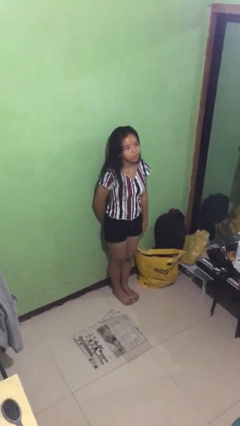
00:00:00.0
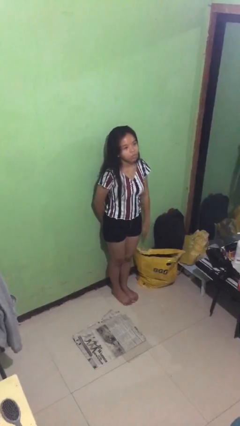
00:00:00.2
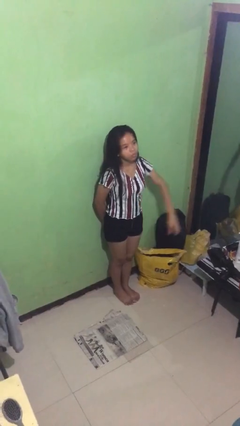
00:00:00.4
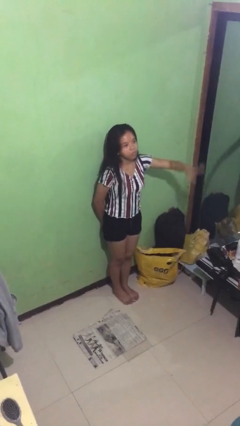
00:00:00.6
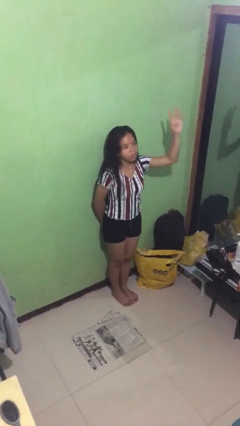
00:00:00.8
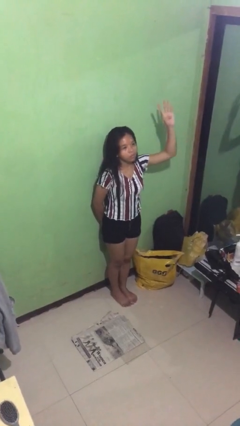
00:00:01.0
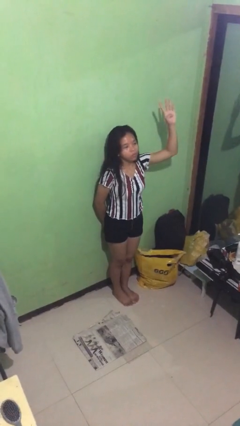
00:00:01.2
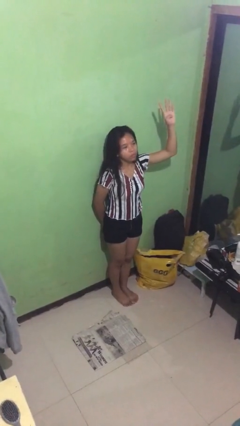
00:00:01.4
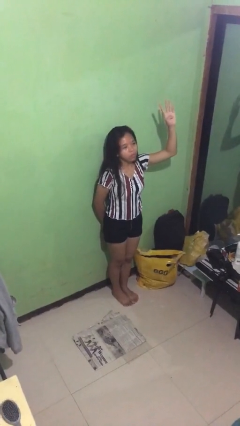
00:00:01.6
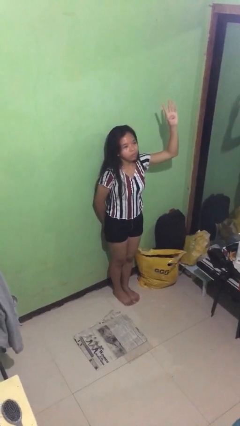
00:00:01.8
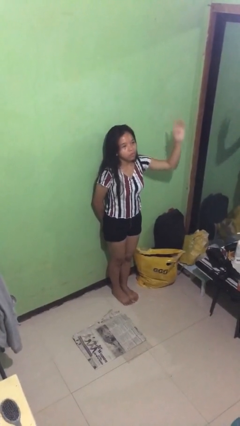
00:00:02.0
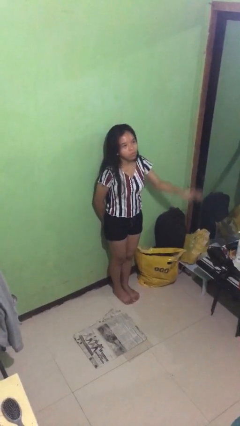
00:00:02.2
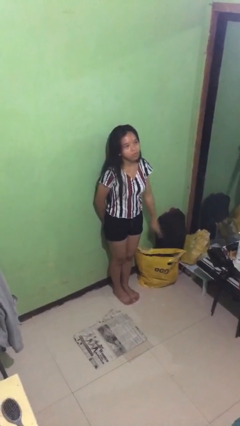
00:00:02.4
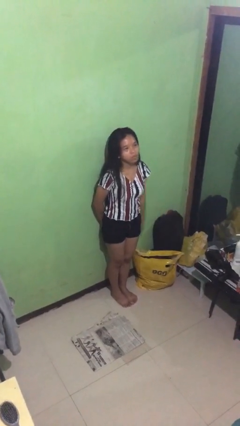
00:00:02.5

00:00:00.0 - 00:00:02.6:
person gestures number four

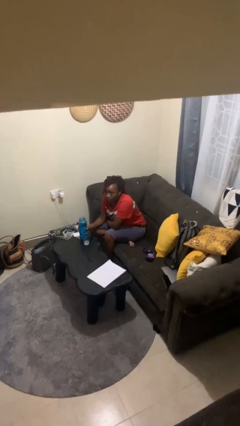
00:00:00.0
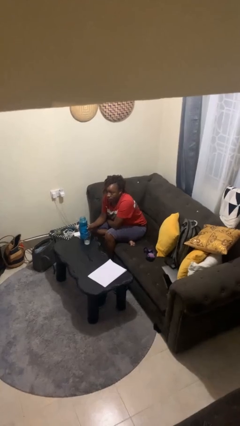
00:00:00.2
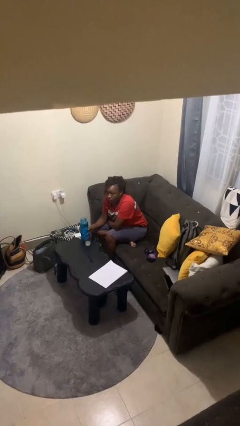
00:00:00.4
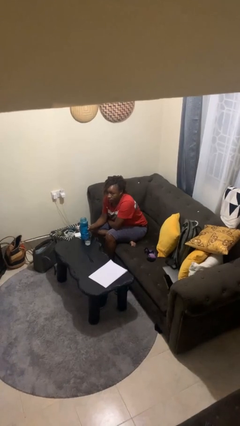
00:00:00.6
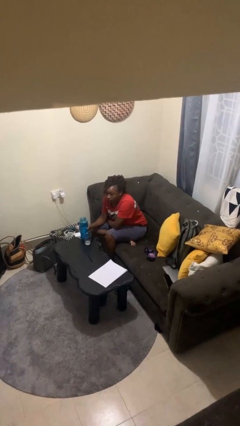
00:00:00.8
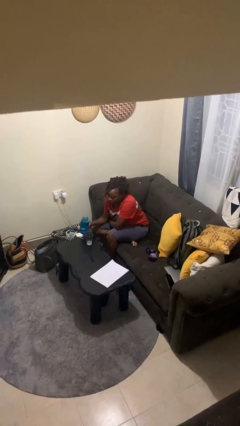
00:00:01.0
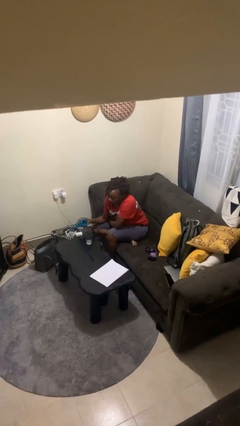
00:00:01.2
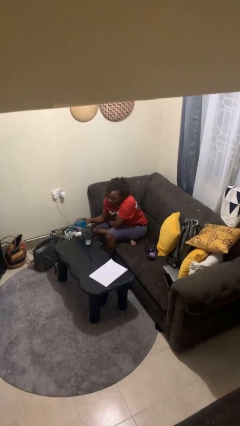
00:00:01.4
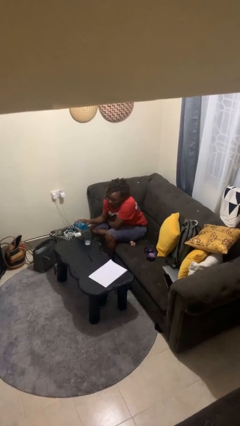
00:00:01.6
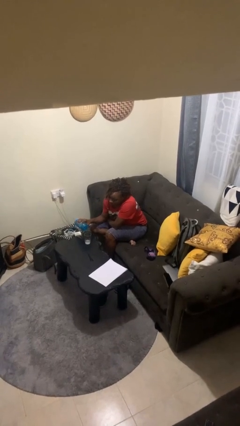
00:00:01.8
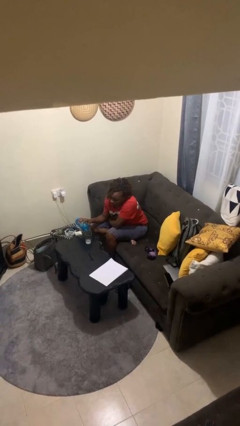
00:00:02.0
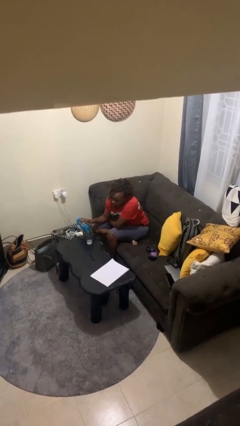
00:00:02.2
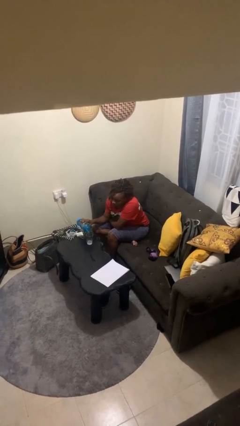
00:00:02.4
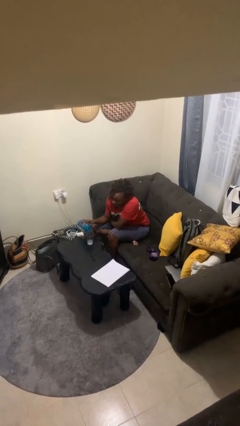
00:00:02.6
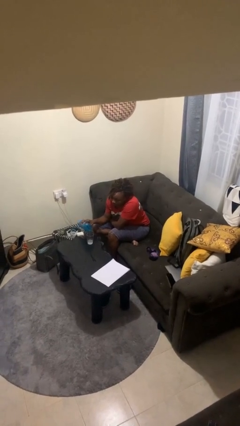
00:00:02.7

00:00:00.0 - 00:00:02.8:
person pours liquid into cup

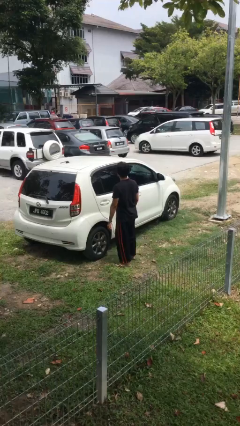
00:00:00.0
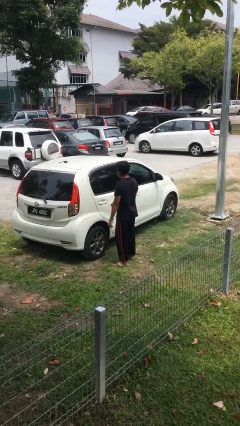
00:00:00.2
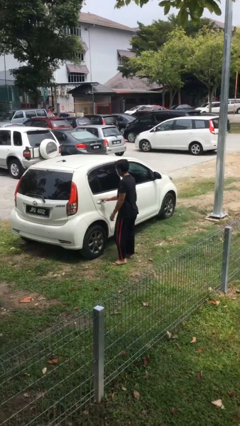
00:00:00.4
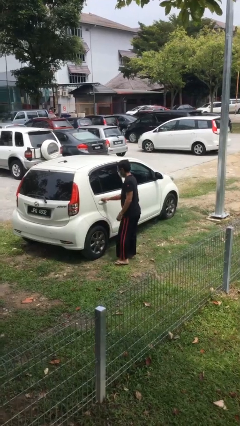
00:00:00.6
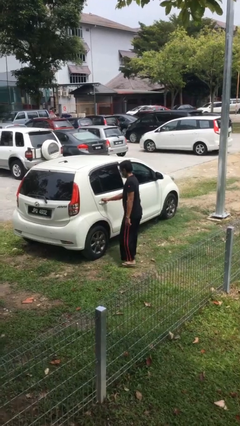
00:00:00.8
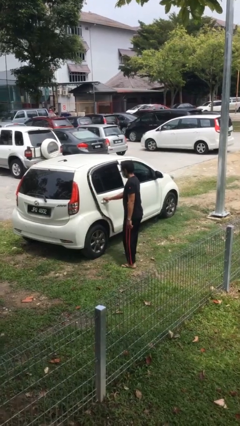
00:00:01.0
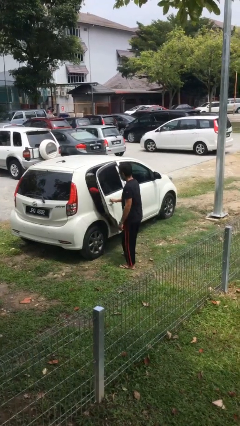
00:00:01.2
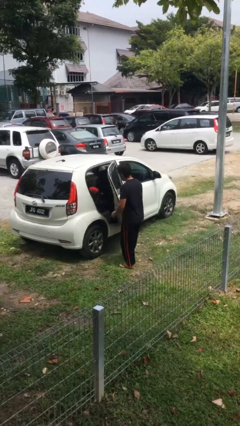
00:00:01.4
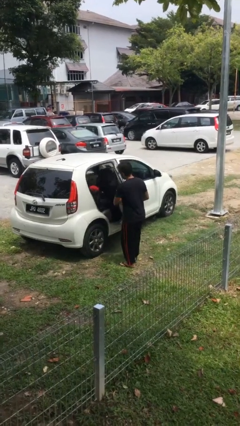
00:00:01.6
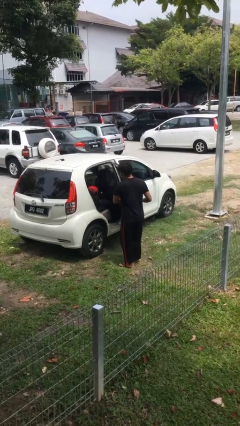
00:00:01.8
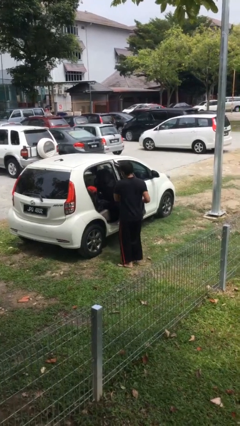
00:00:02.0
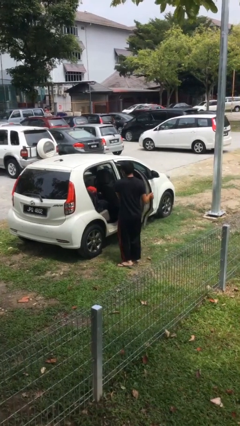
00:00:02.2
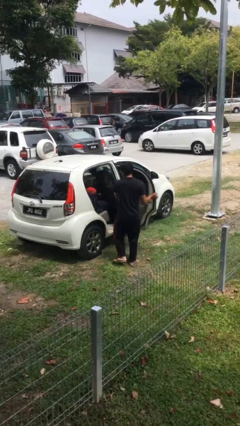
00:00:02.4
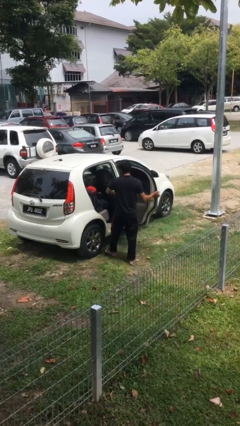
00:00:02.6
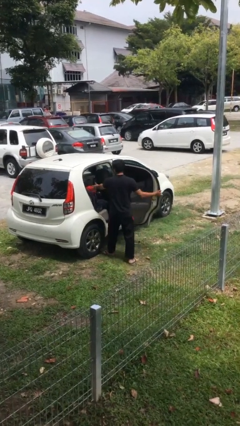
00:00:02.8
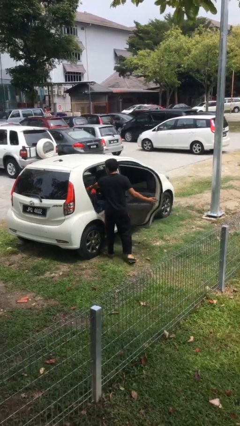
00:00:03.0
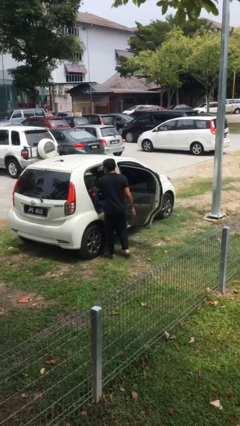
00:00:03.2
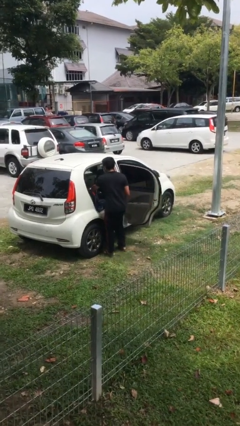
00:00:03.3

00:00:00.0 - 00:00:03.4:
person opens car door

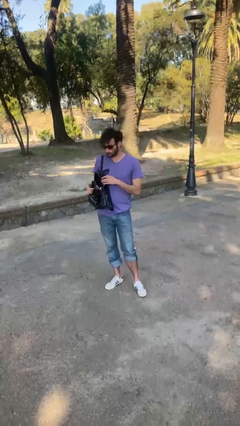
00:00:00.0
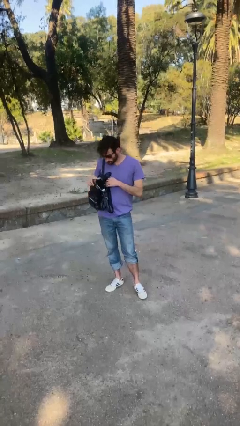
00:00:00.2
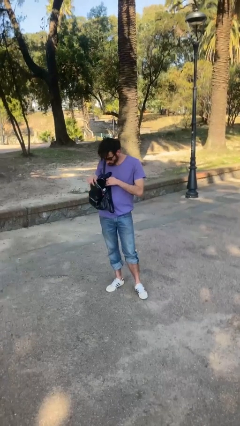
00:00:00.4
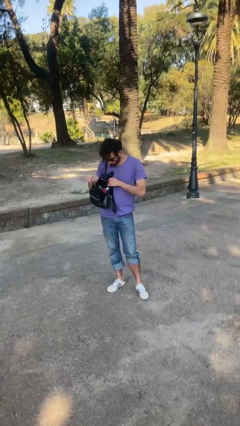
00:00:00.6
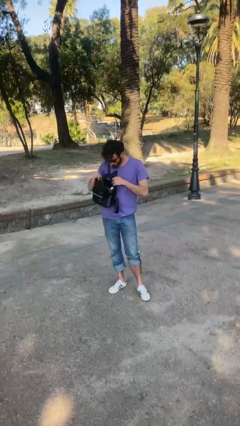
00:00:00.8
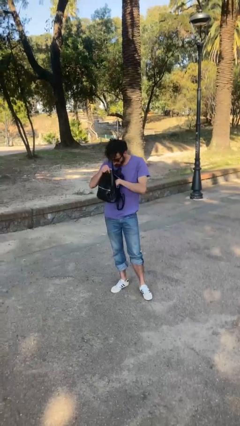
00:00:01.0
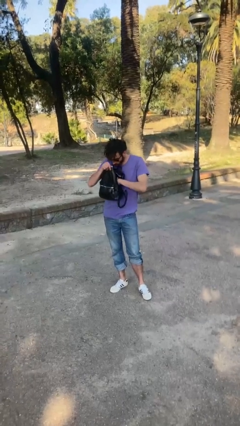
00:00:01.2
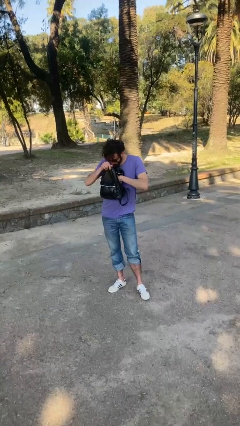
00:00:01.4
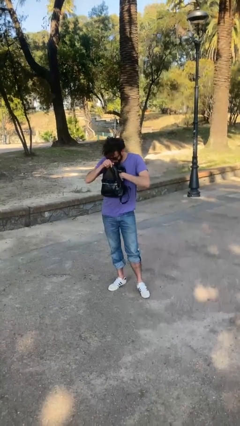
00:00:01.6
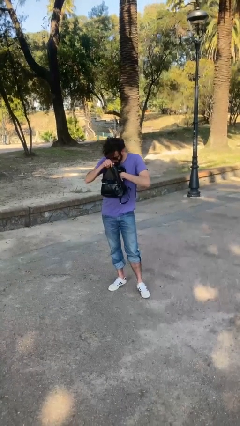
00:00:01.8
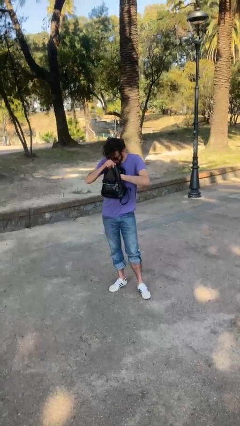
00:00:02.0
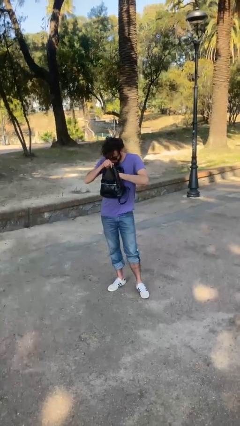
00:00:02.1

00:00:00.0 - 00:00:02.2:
person searches in purse

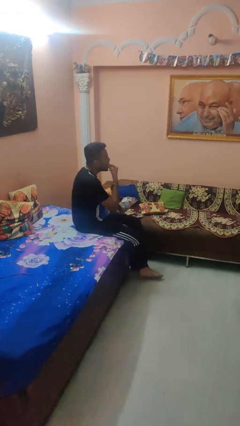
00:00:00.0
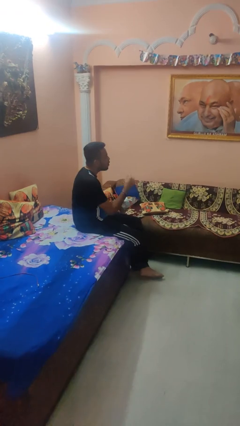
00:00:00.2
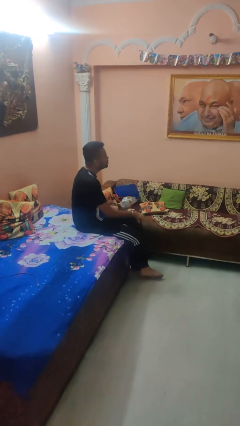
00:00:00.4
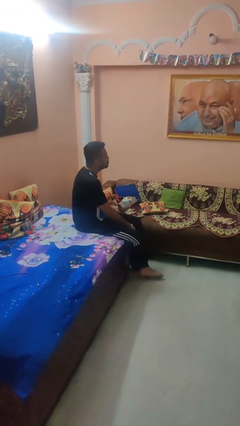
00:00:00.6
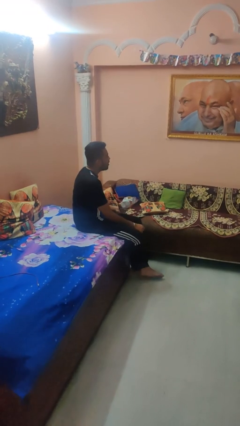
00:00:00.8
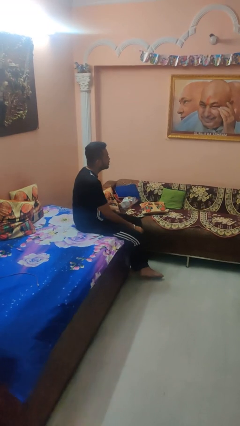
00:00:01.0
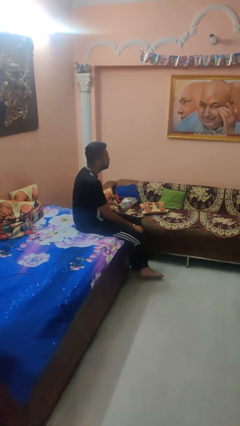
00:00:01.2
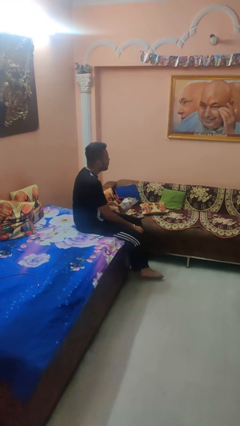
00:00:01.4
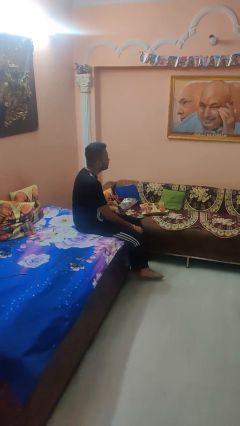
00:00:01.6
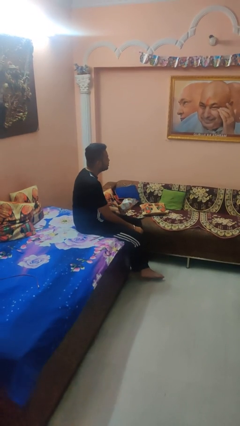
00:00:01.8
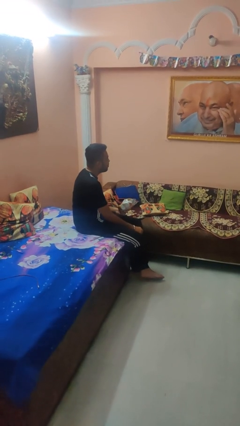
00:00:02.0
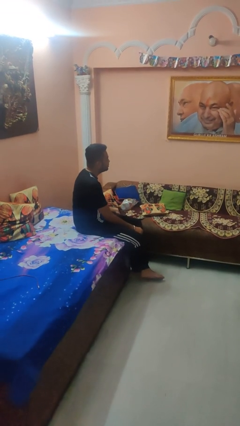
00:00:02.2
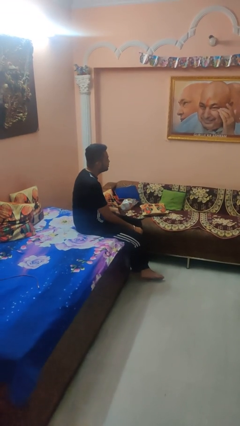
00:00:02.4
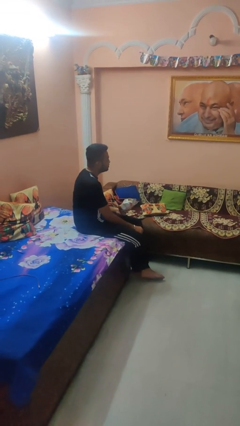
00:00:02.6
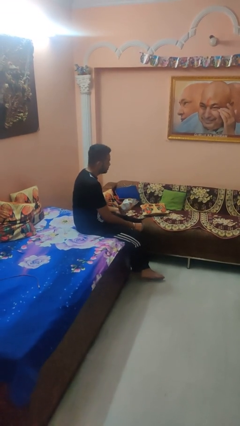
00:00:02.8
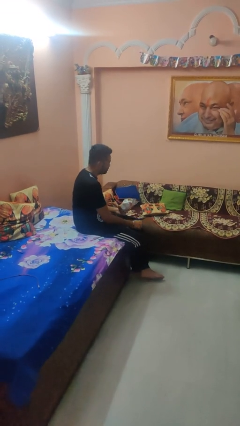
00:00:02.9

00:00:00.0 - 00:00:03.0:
person eats snack from bag

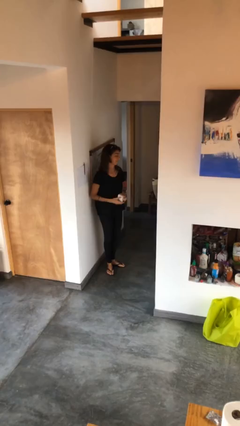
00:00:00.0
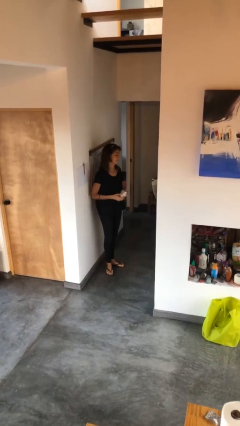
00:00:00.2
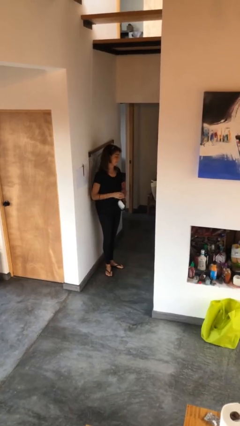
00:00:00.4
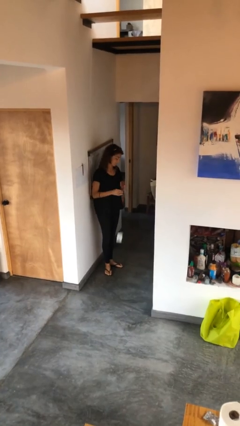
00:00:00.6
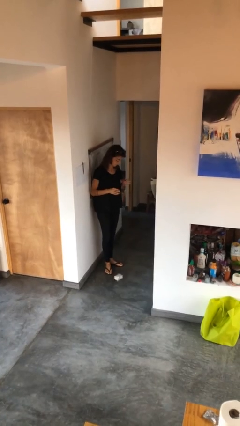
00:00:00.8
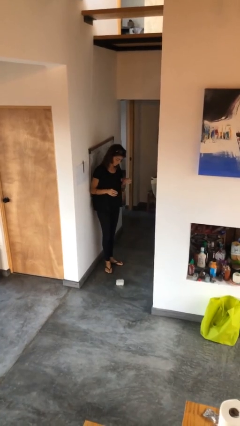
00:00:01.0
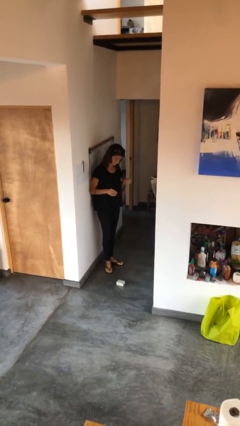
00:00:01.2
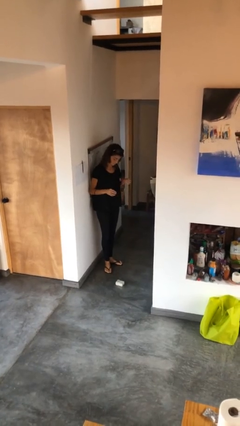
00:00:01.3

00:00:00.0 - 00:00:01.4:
person drops object

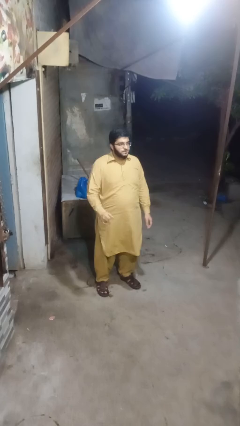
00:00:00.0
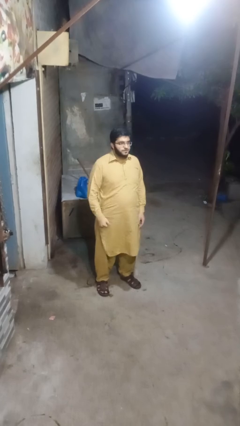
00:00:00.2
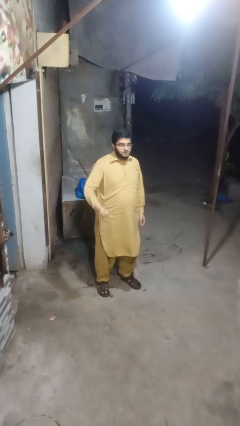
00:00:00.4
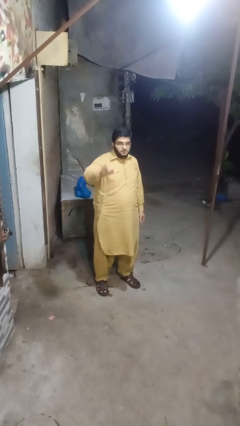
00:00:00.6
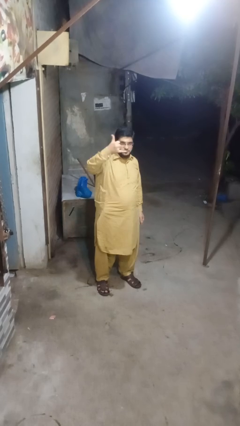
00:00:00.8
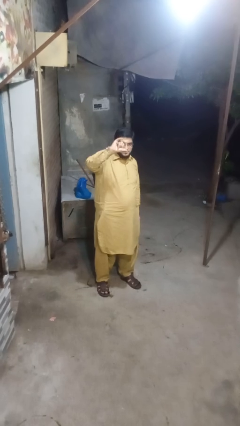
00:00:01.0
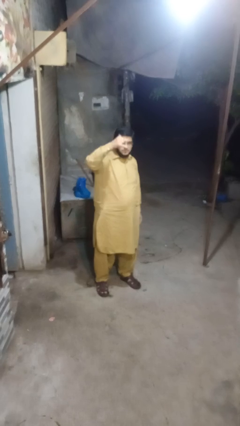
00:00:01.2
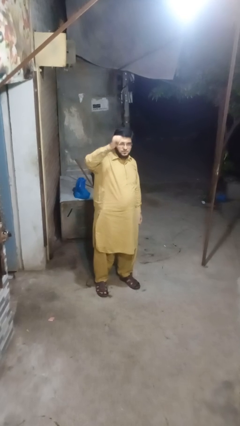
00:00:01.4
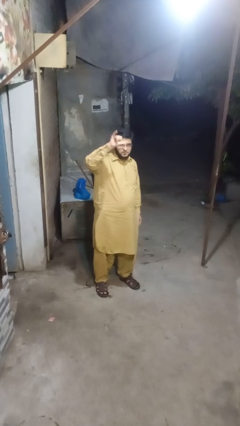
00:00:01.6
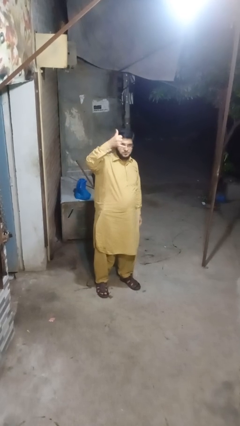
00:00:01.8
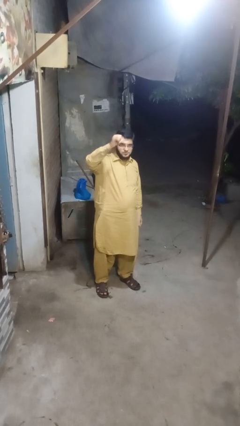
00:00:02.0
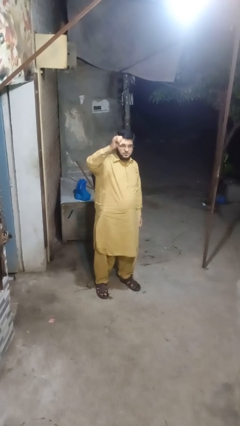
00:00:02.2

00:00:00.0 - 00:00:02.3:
person gestures hang loose
